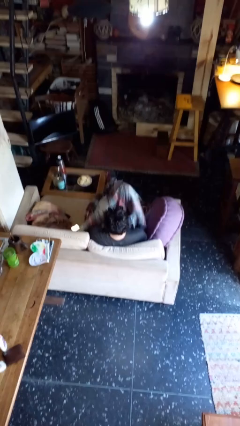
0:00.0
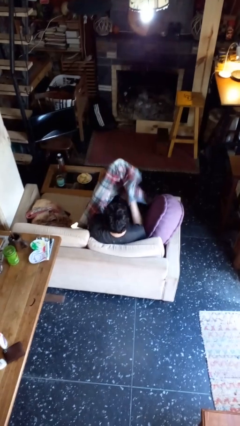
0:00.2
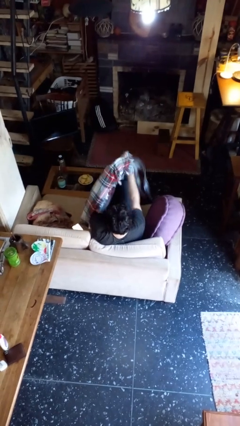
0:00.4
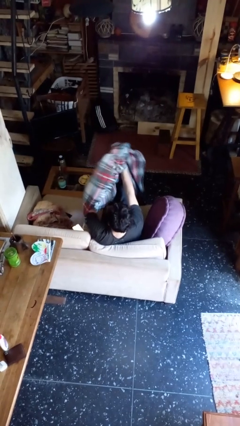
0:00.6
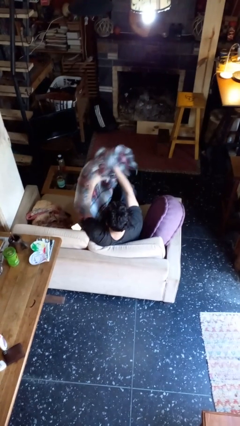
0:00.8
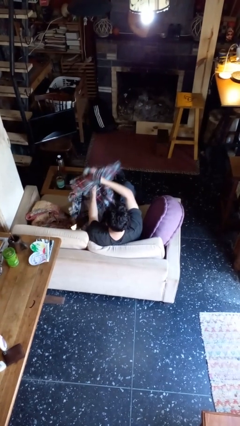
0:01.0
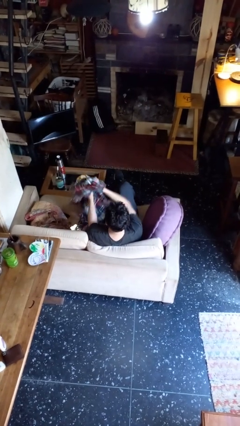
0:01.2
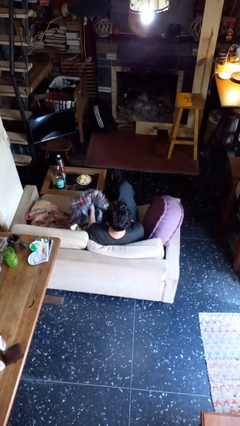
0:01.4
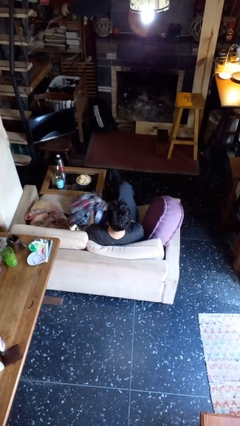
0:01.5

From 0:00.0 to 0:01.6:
person uncovers with blanket

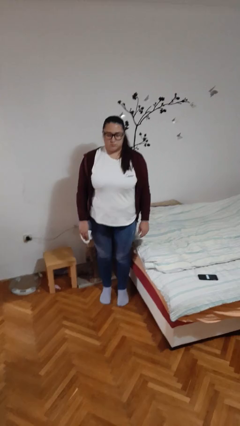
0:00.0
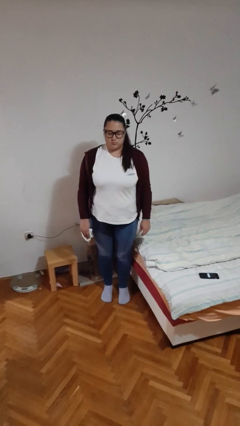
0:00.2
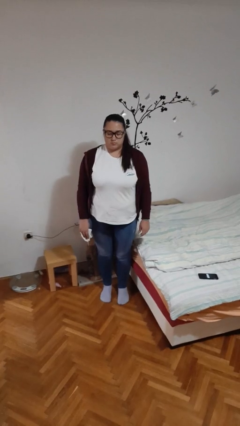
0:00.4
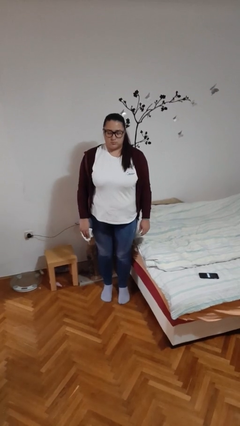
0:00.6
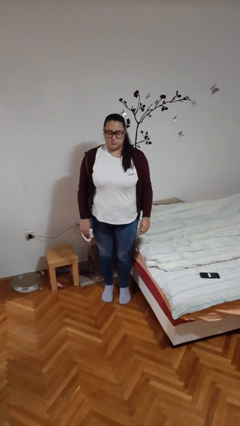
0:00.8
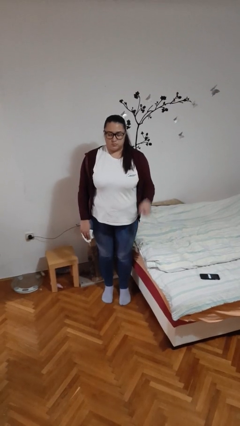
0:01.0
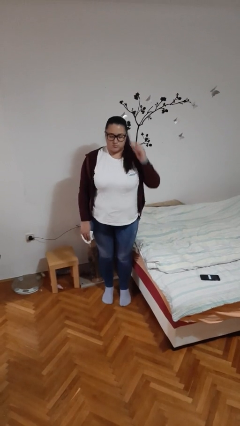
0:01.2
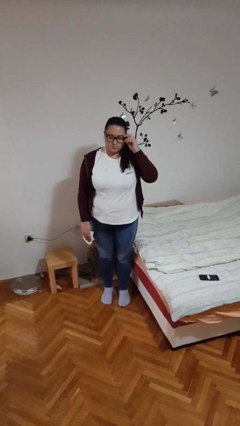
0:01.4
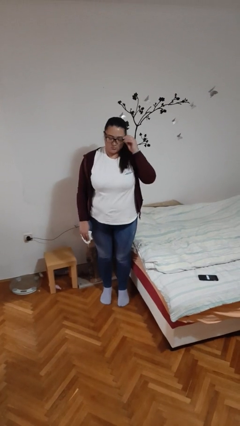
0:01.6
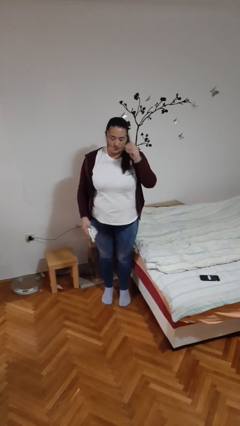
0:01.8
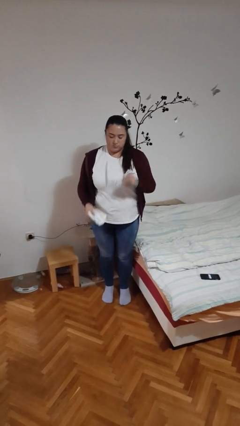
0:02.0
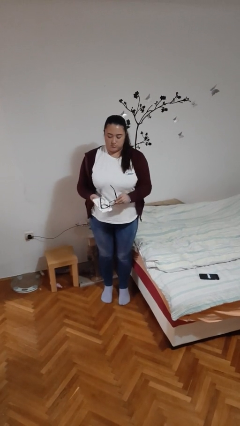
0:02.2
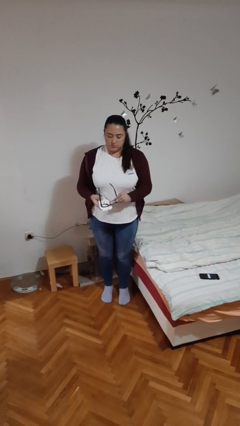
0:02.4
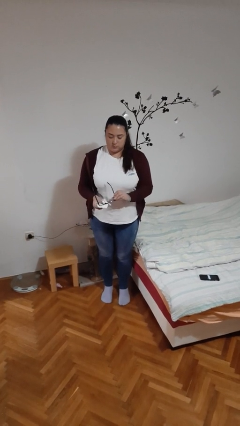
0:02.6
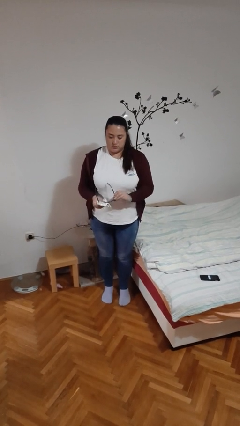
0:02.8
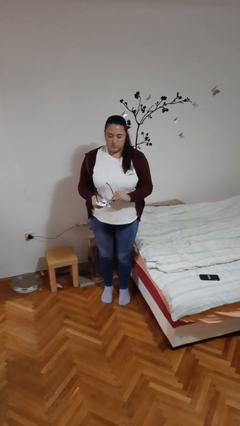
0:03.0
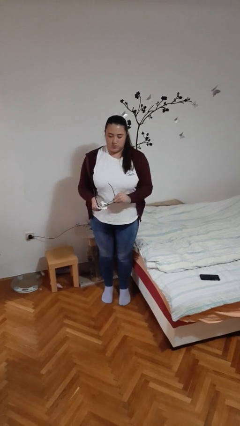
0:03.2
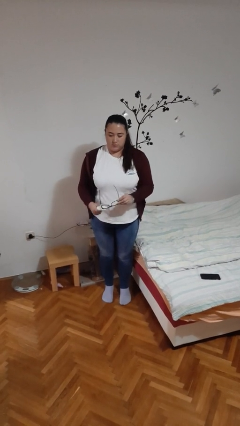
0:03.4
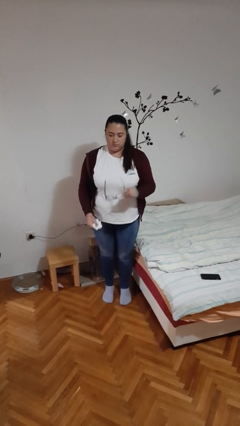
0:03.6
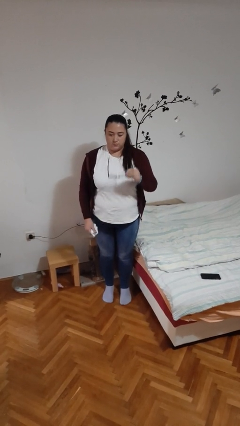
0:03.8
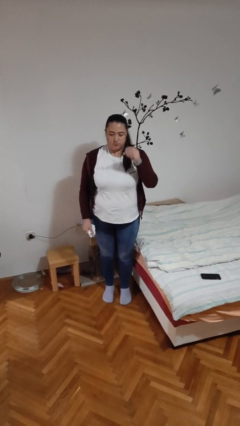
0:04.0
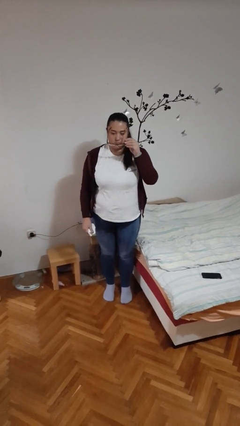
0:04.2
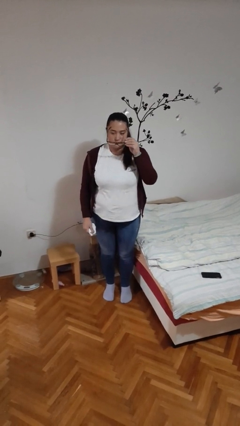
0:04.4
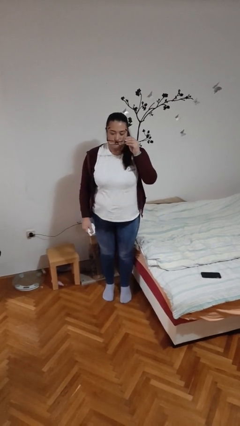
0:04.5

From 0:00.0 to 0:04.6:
person cleans eyeglasses

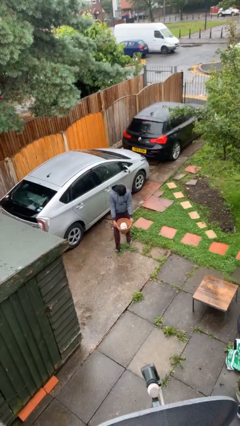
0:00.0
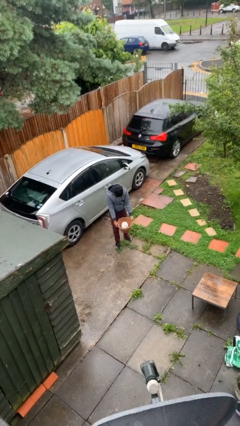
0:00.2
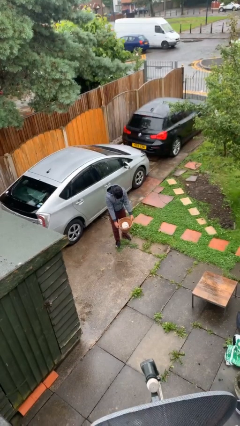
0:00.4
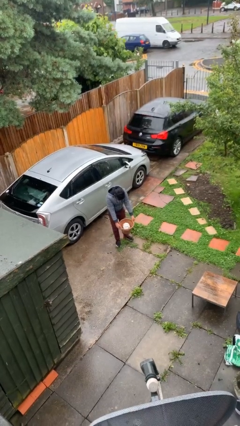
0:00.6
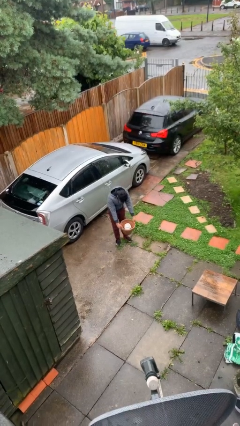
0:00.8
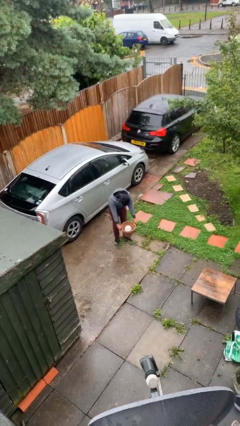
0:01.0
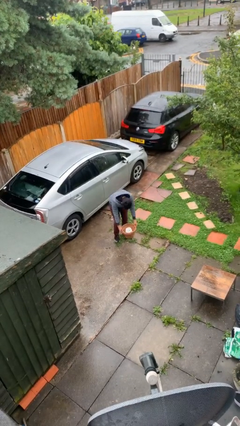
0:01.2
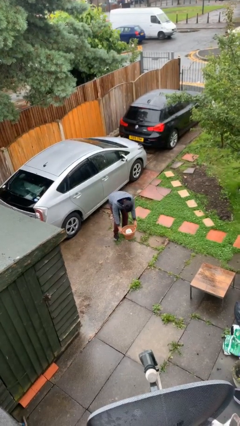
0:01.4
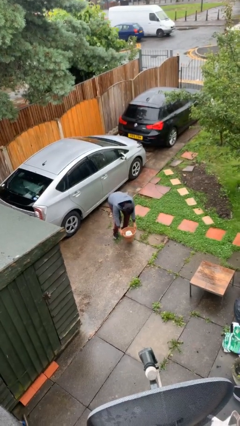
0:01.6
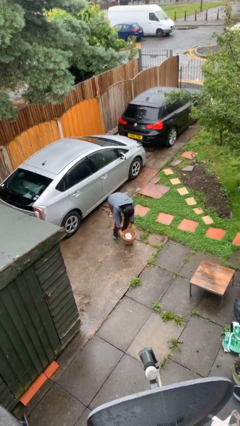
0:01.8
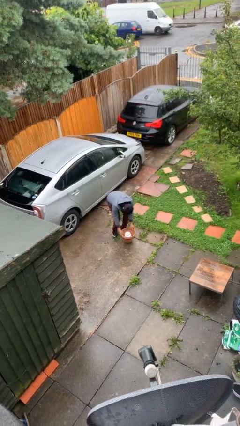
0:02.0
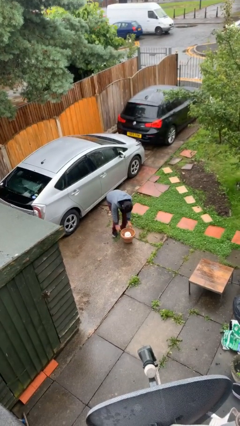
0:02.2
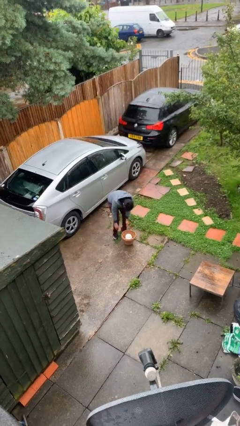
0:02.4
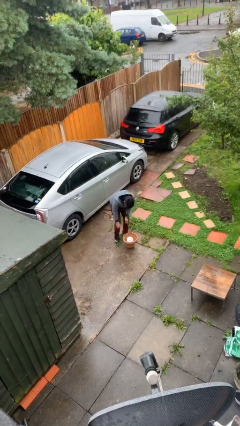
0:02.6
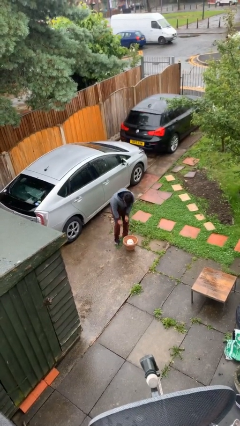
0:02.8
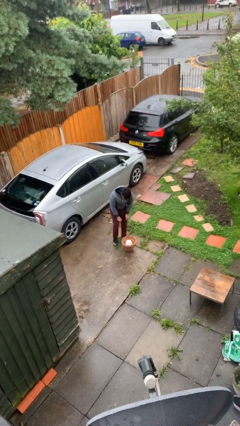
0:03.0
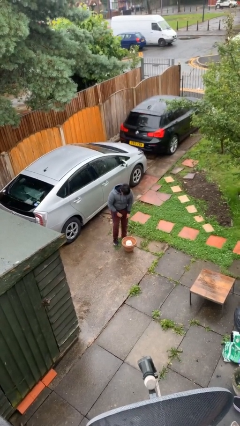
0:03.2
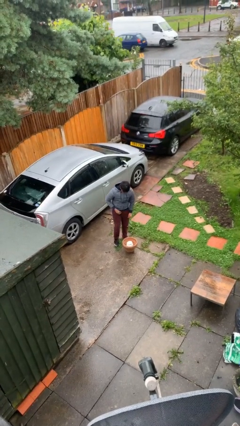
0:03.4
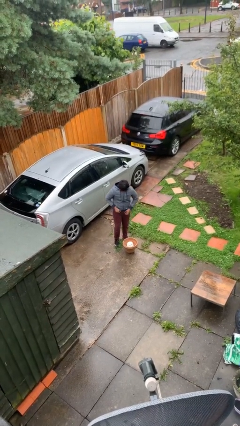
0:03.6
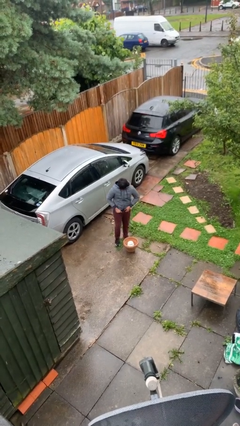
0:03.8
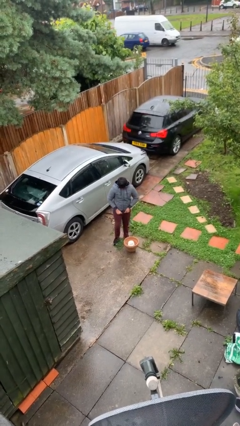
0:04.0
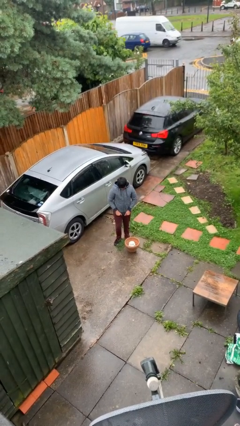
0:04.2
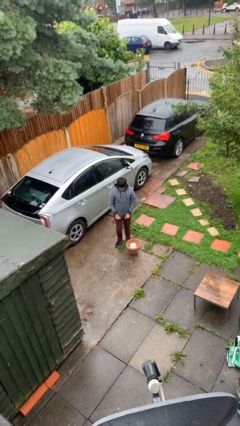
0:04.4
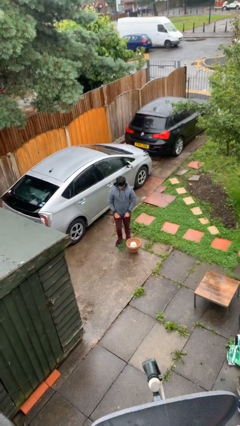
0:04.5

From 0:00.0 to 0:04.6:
person puts down object on floor

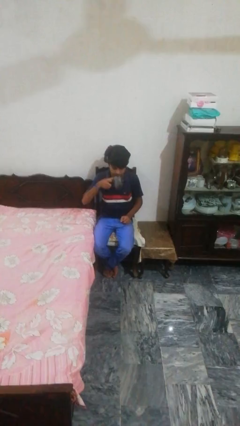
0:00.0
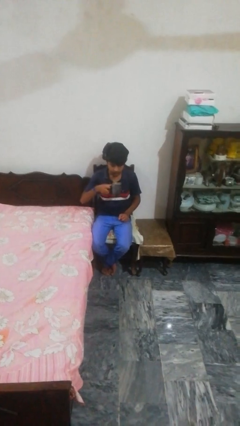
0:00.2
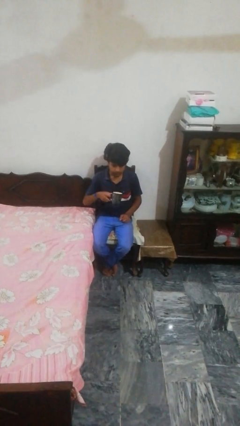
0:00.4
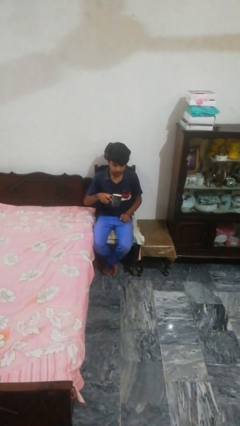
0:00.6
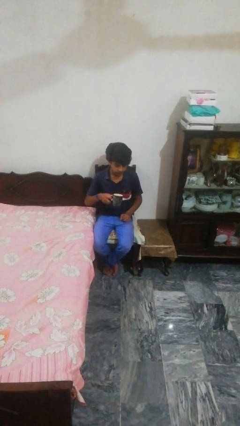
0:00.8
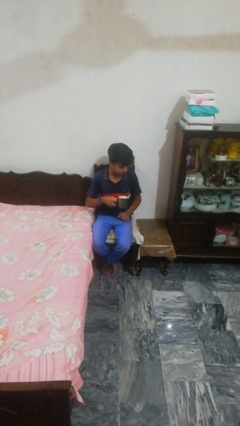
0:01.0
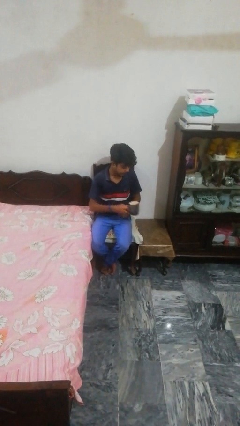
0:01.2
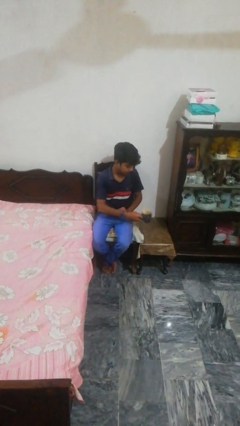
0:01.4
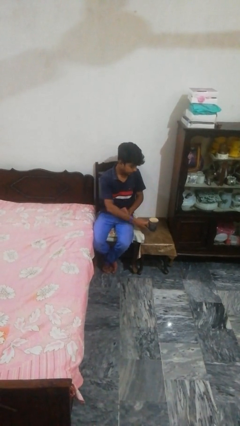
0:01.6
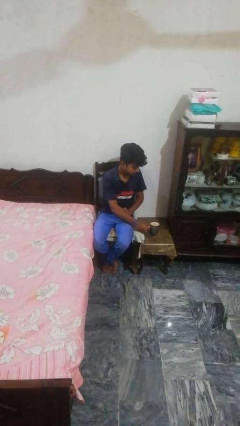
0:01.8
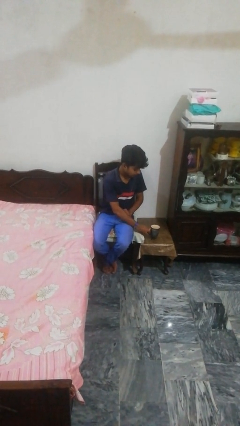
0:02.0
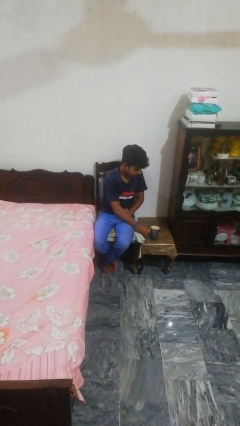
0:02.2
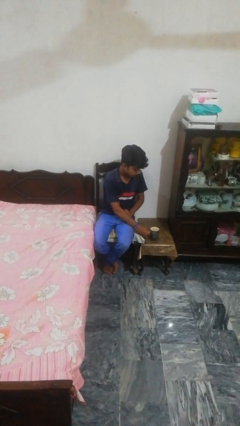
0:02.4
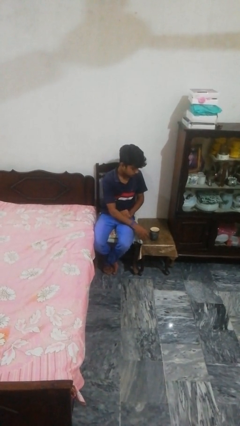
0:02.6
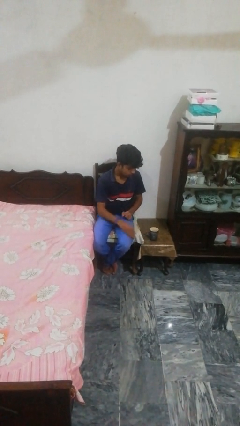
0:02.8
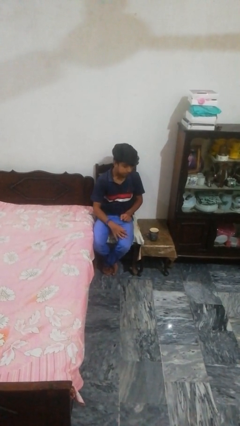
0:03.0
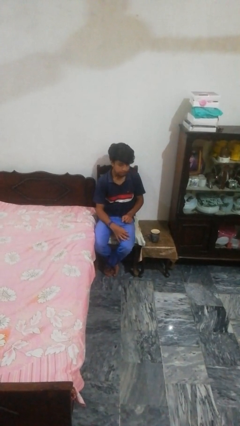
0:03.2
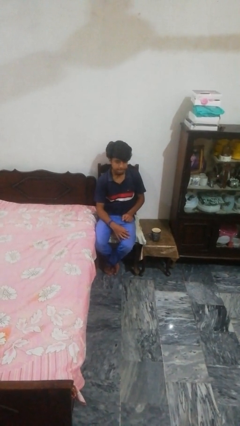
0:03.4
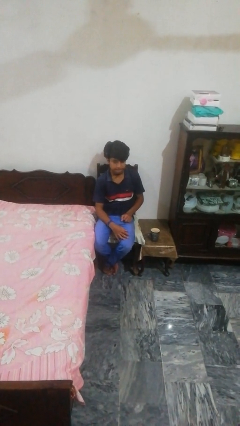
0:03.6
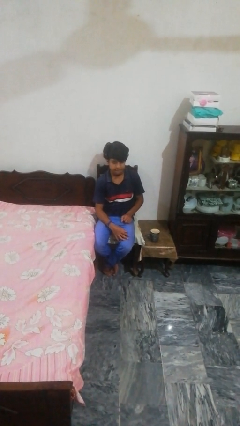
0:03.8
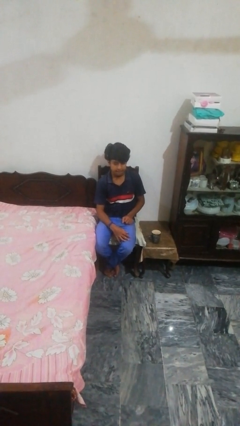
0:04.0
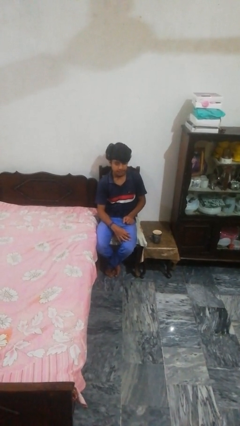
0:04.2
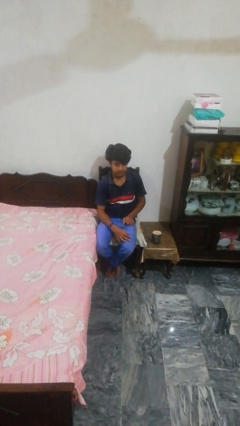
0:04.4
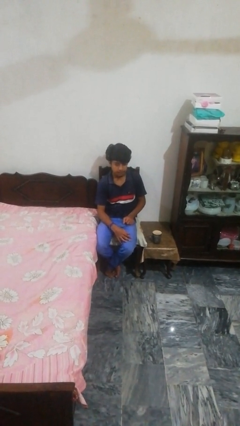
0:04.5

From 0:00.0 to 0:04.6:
person puts down object on table

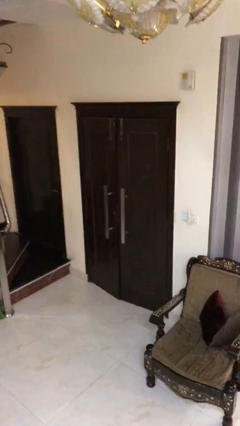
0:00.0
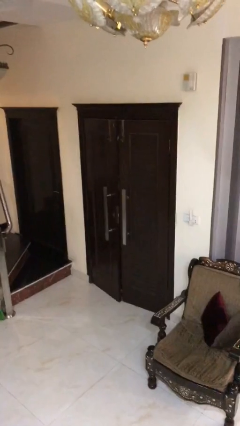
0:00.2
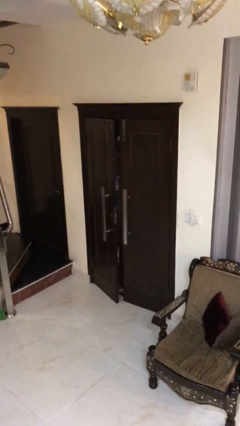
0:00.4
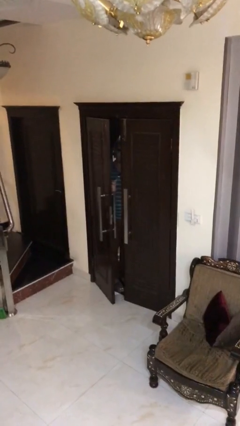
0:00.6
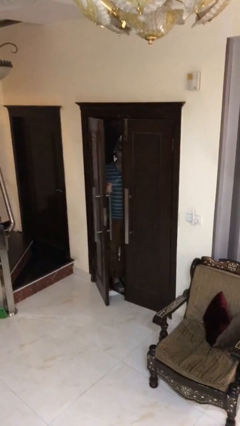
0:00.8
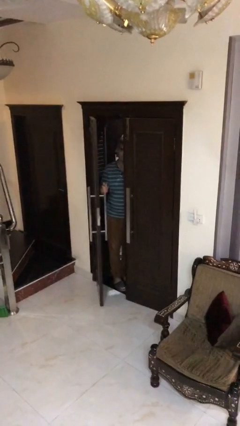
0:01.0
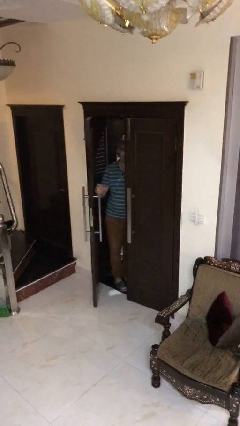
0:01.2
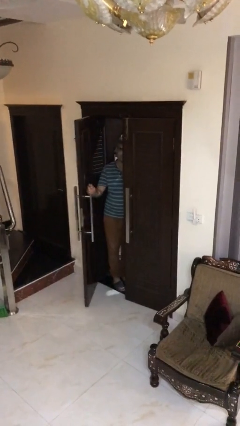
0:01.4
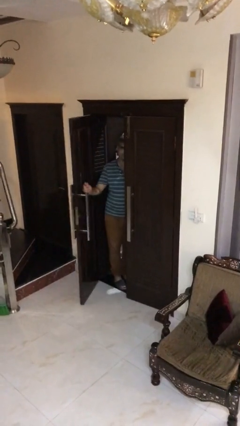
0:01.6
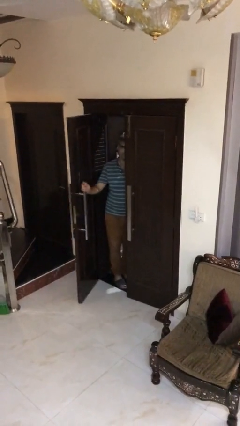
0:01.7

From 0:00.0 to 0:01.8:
person opens facility door

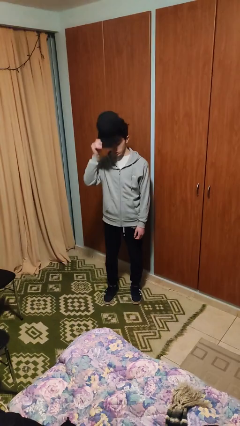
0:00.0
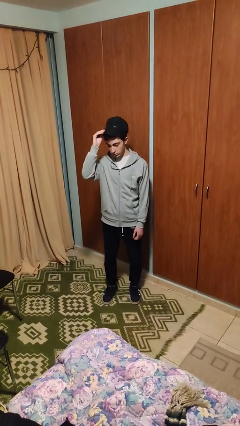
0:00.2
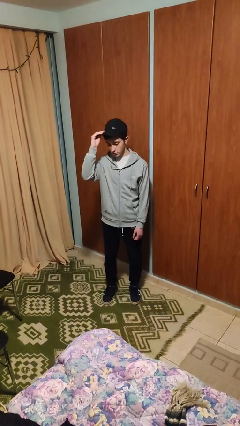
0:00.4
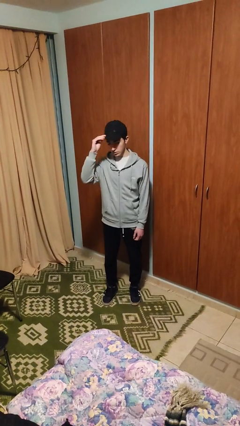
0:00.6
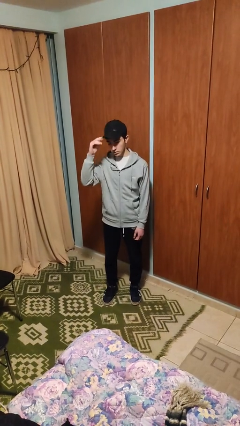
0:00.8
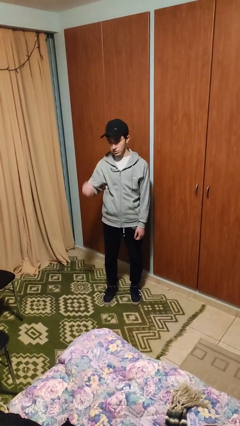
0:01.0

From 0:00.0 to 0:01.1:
person puts on hat
